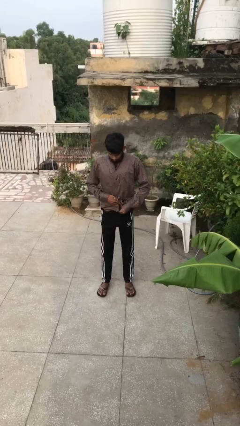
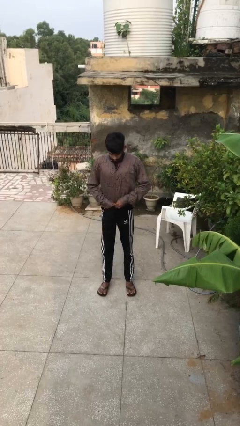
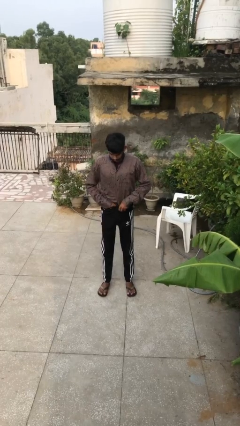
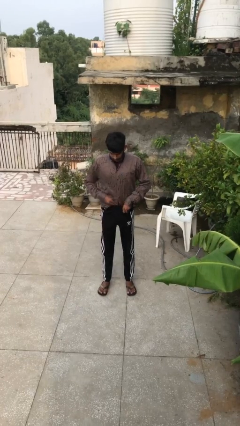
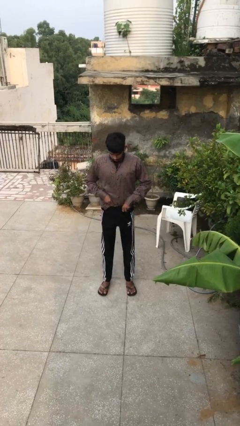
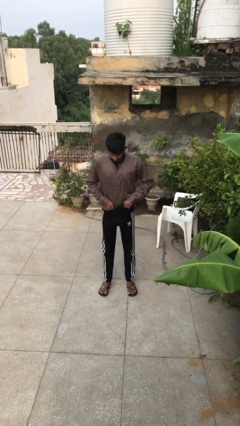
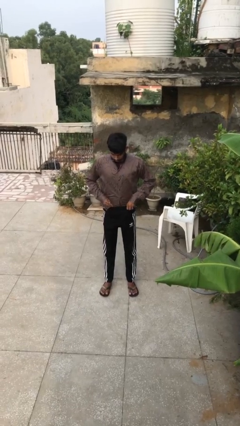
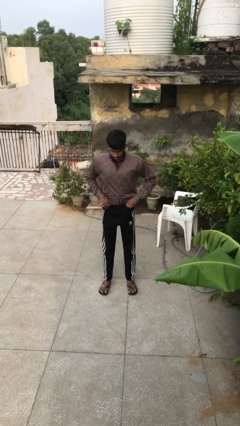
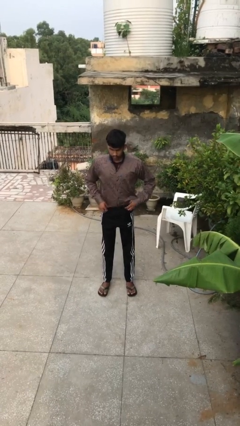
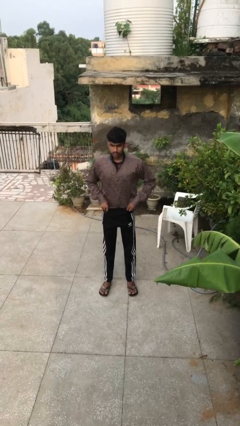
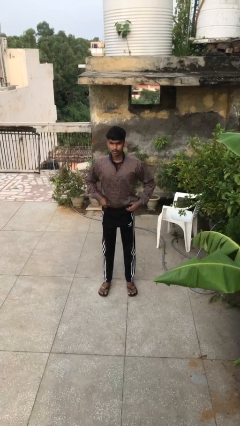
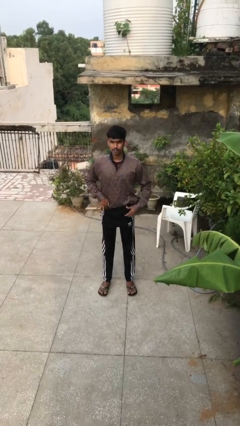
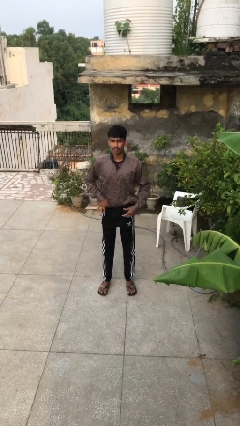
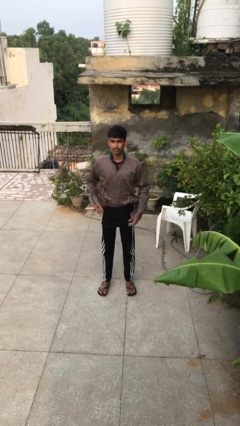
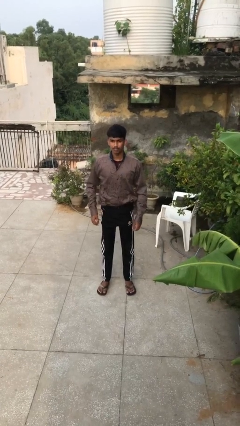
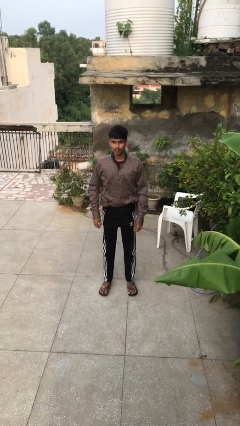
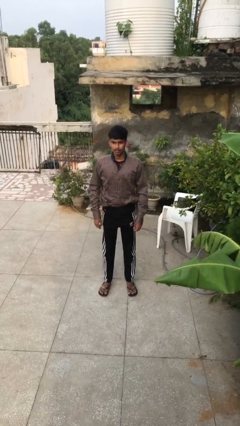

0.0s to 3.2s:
person tucks in shirt

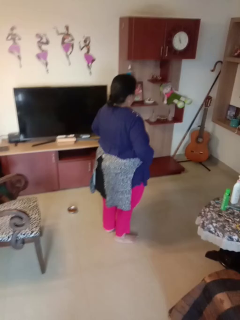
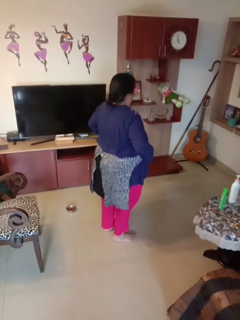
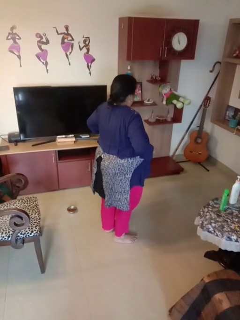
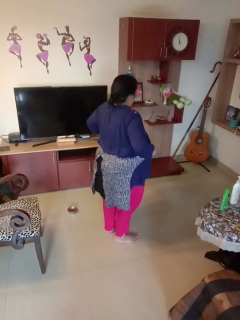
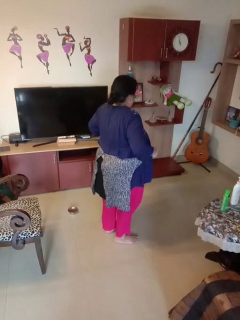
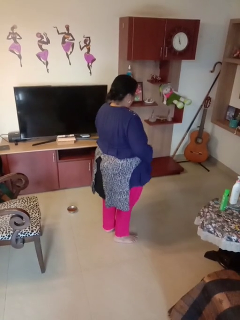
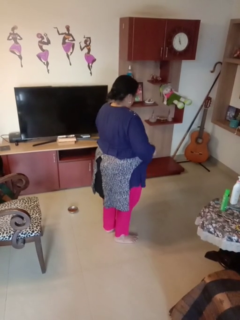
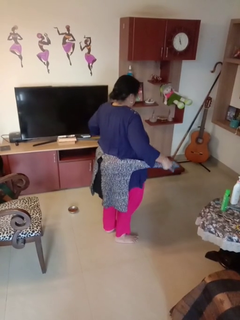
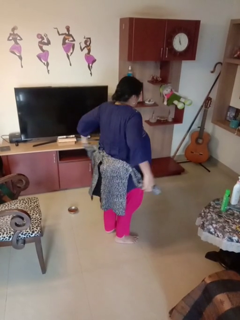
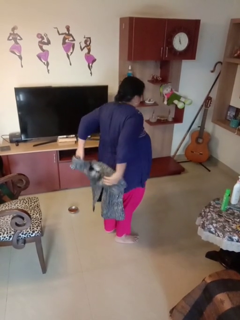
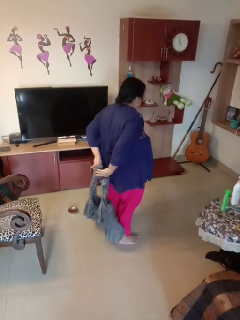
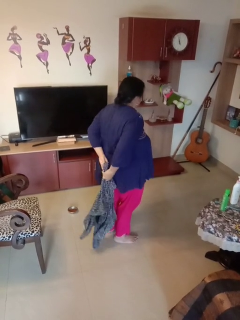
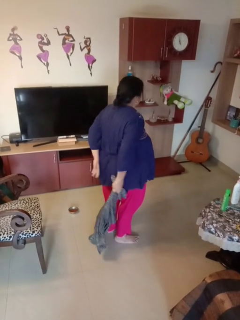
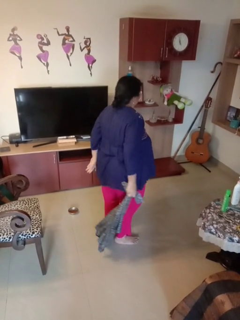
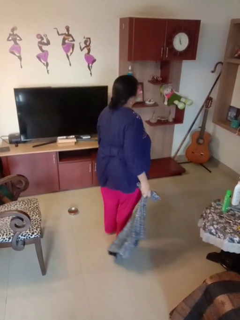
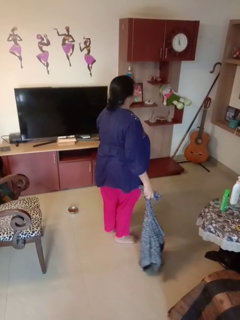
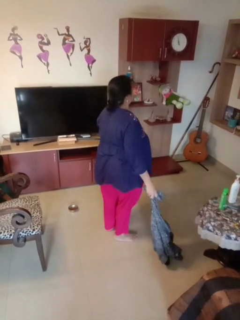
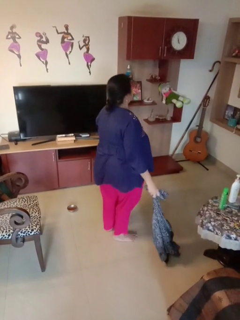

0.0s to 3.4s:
person unties jacket around waist

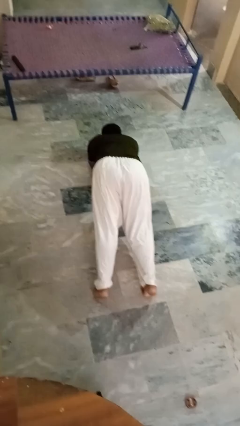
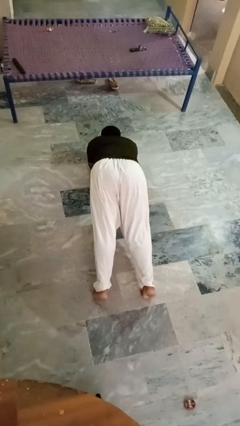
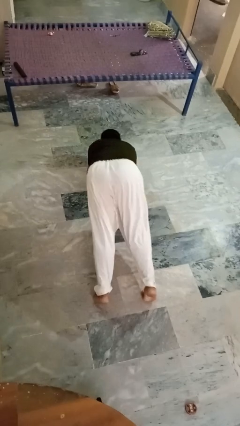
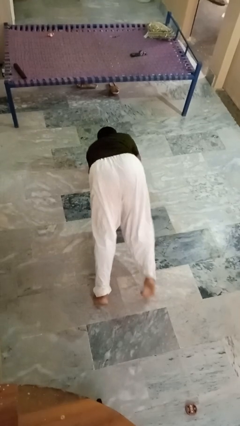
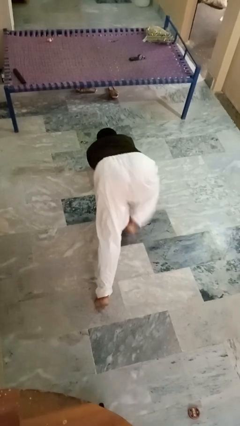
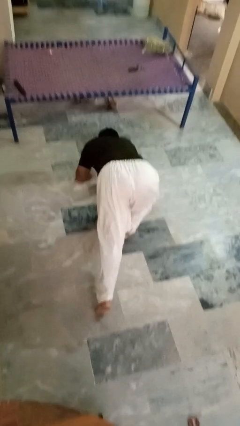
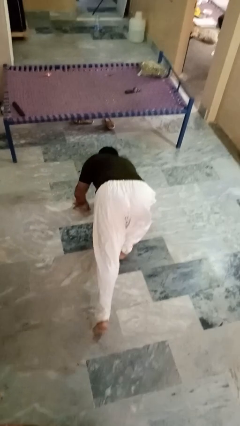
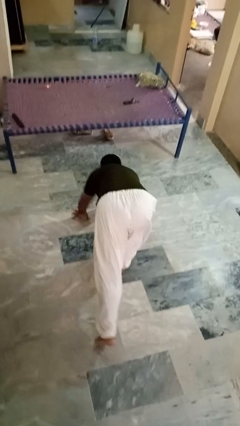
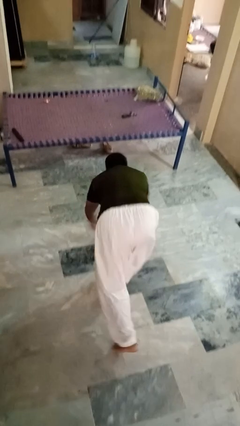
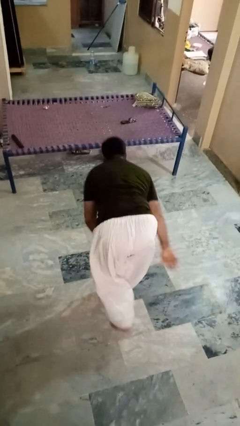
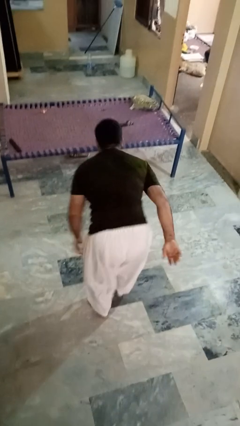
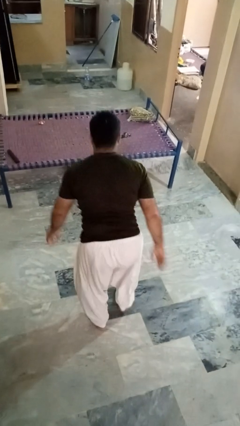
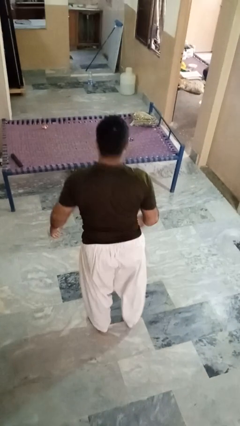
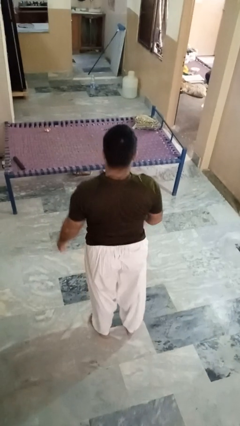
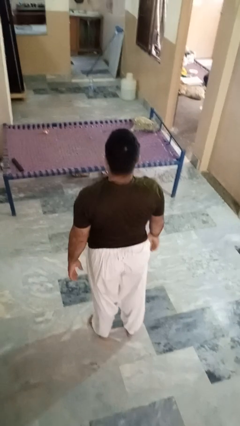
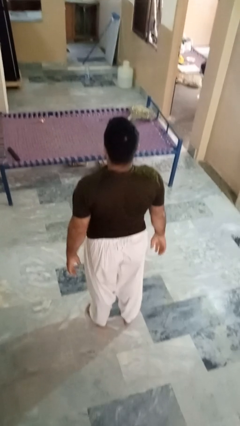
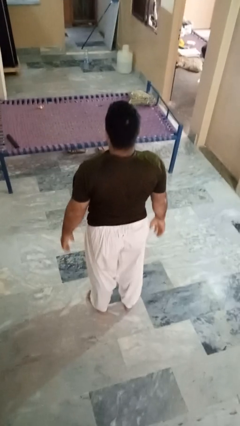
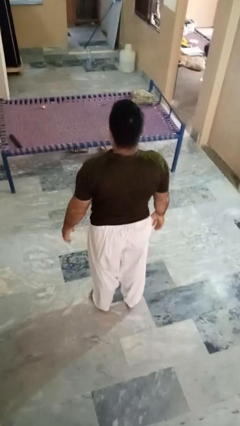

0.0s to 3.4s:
person stands up from floor

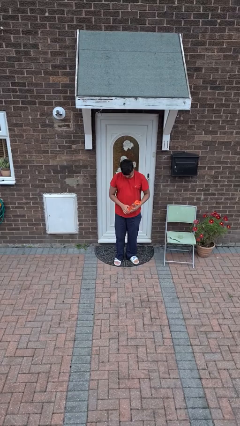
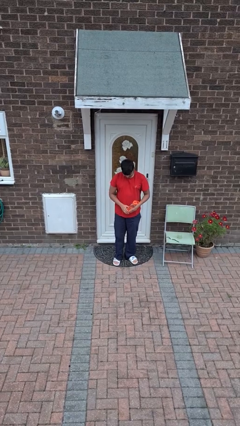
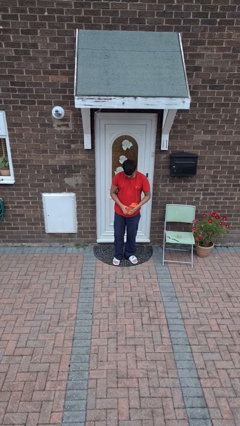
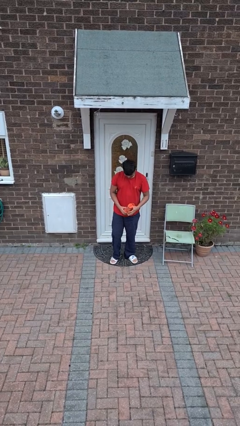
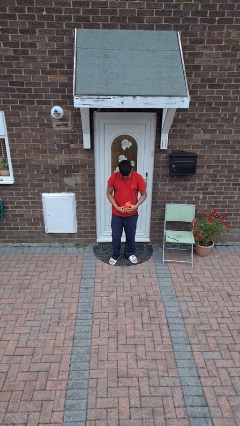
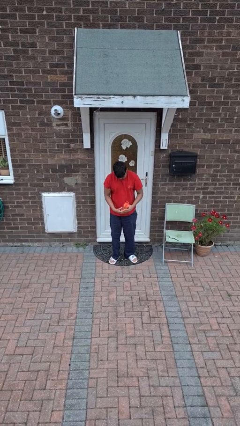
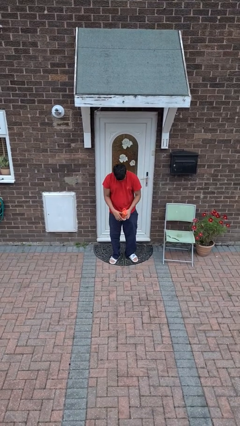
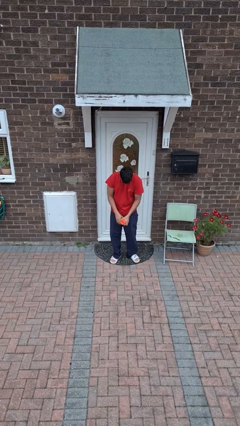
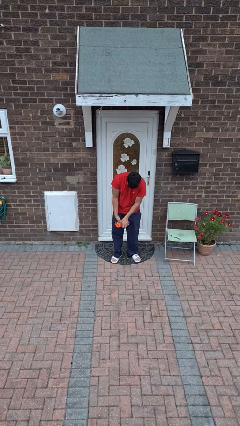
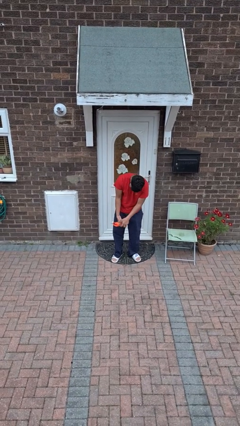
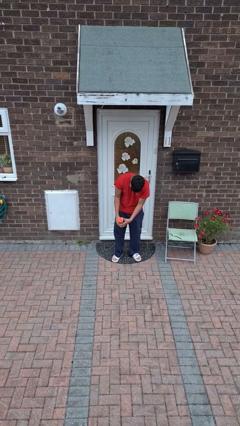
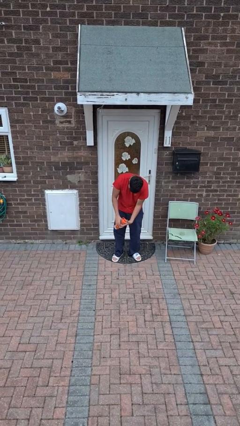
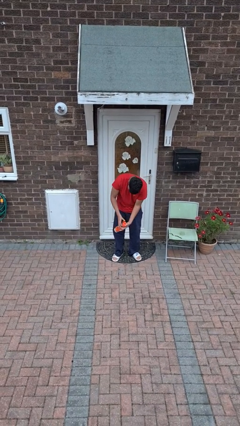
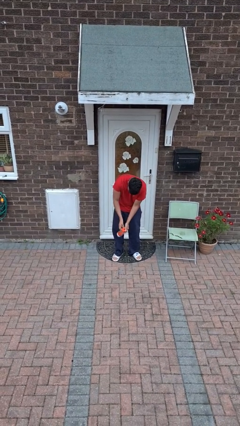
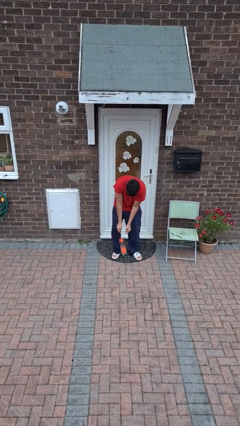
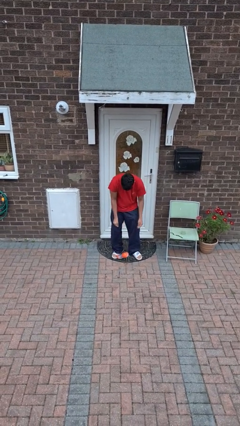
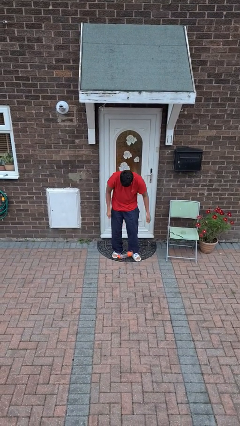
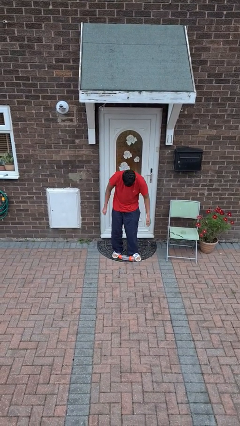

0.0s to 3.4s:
person drops object

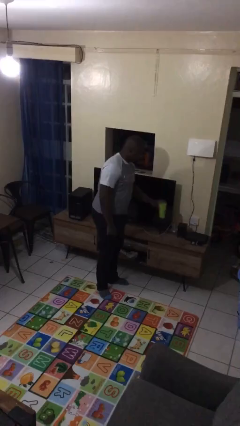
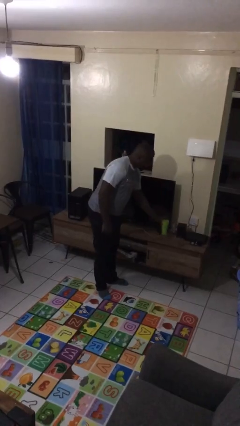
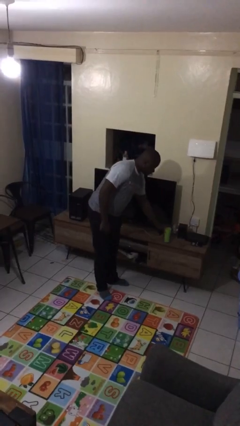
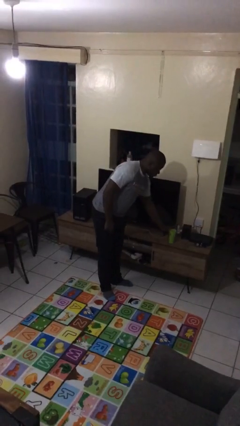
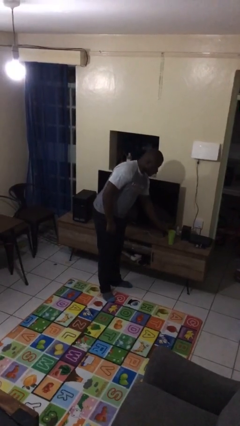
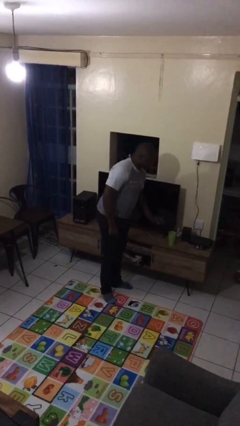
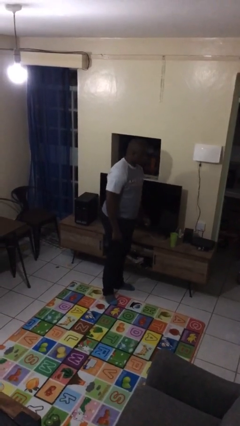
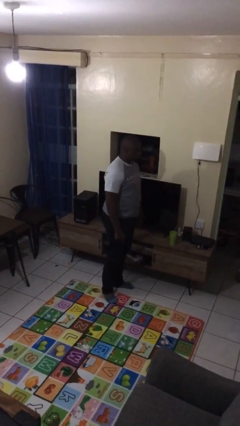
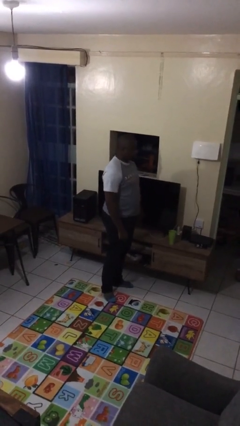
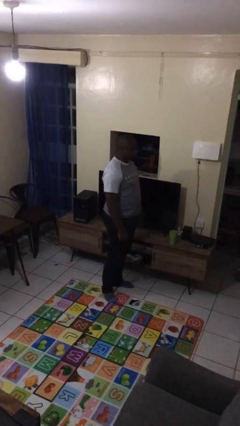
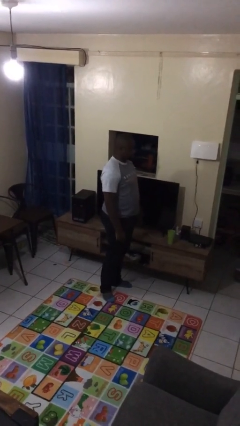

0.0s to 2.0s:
person puts down object on countertop

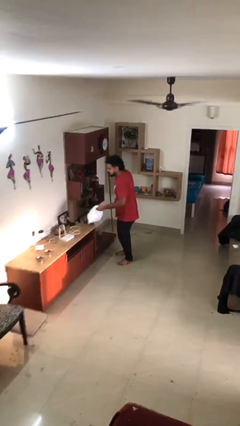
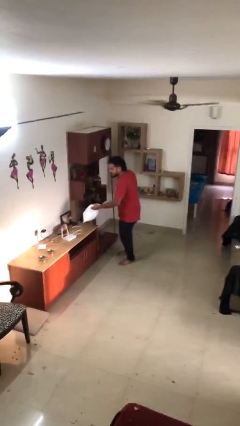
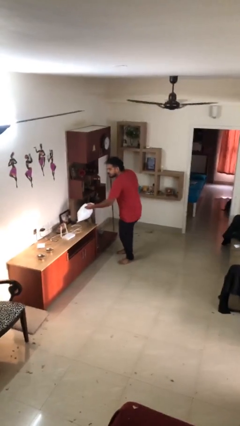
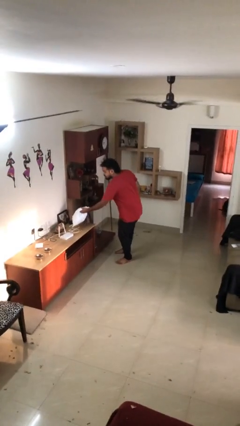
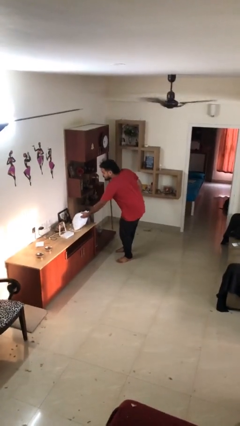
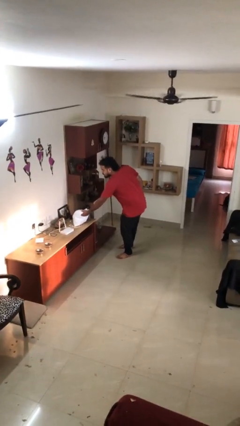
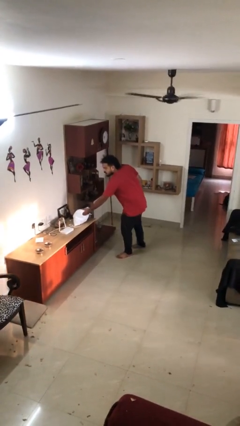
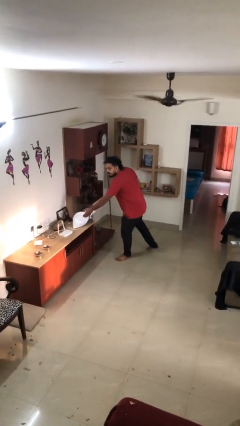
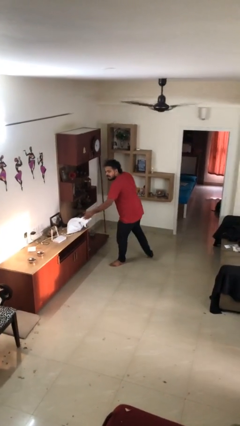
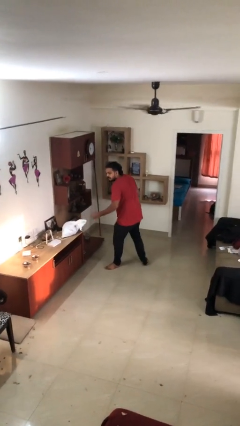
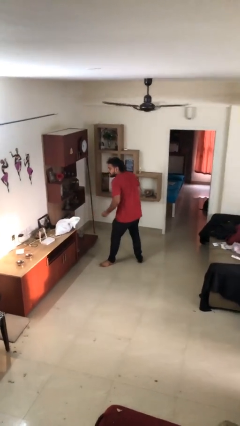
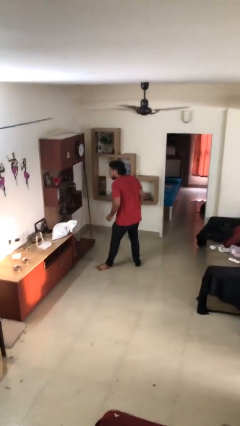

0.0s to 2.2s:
person puts down object on table

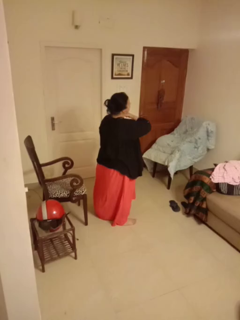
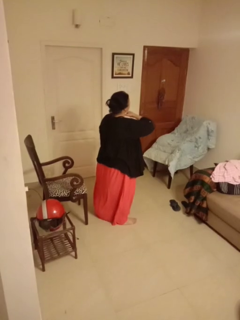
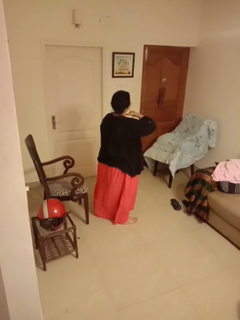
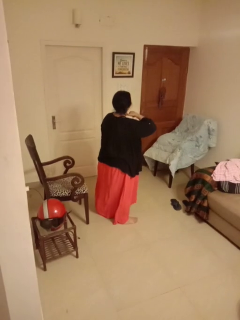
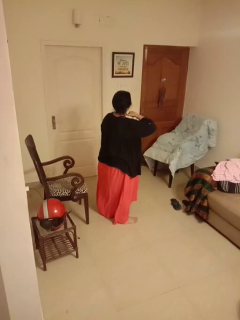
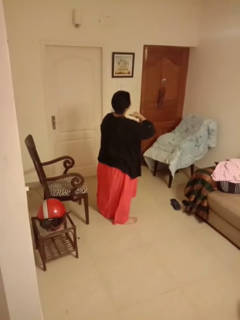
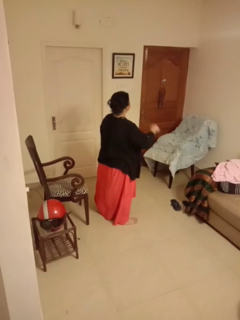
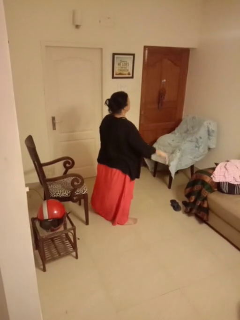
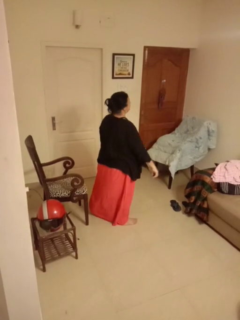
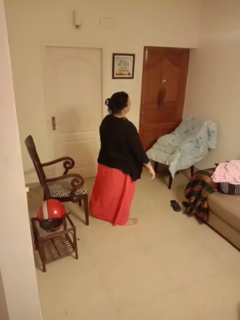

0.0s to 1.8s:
person gestures cut
